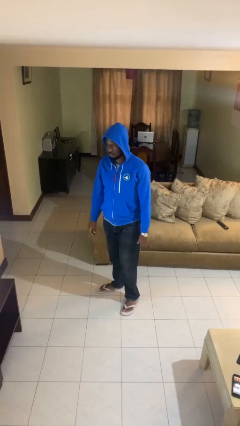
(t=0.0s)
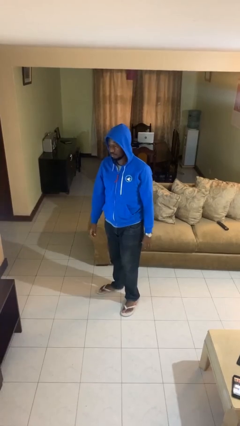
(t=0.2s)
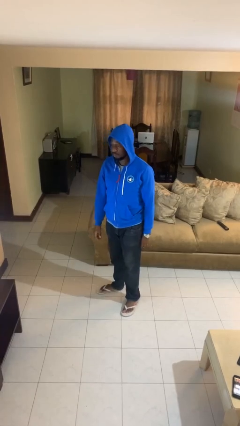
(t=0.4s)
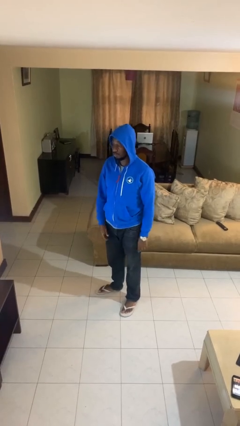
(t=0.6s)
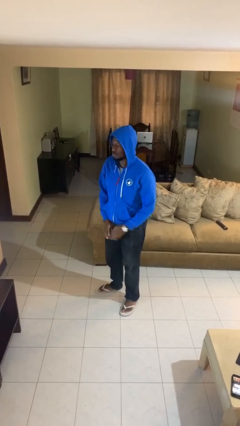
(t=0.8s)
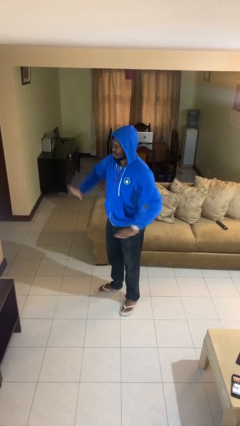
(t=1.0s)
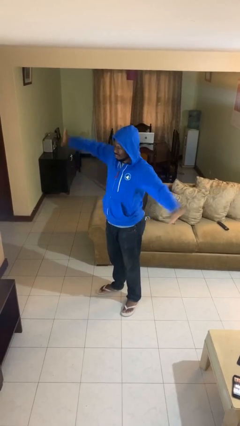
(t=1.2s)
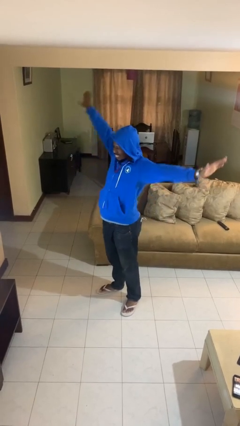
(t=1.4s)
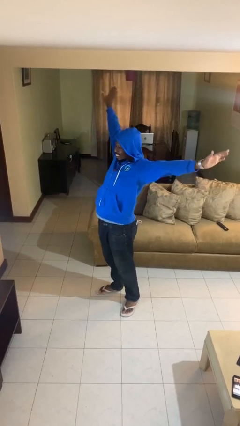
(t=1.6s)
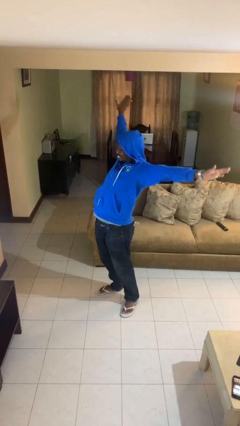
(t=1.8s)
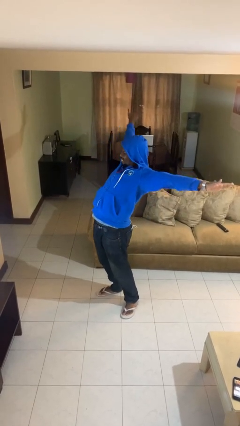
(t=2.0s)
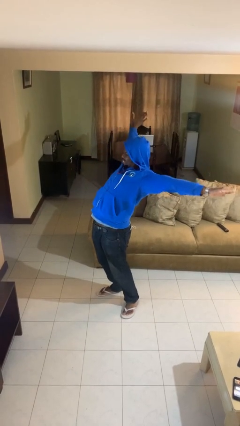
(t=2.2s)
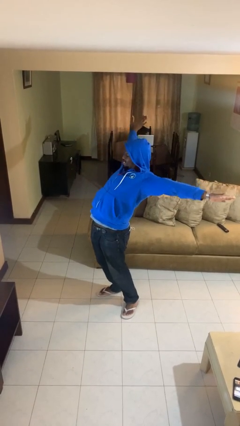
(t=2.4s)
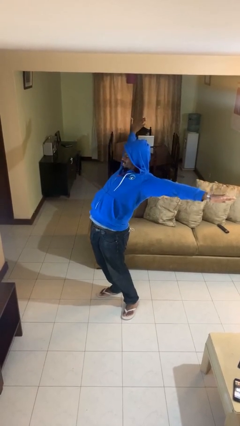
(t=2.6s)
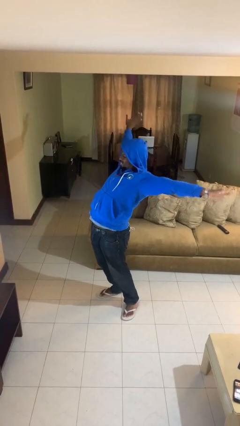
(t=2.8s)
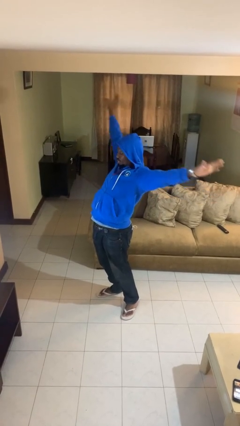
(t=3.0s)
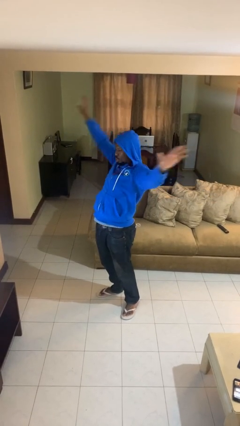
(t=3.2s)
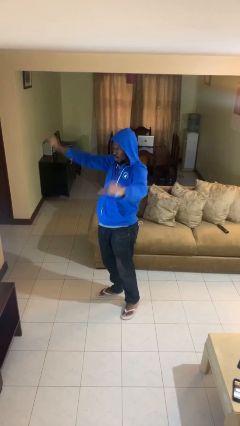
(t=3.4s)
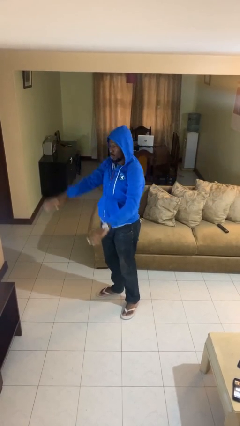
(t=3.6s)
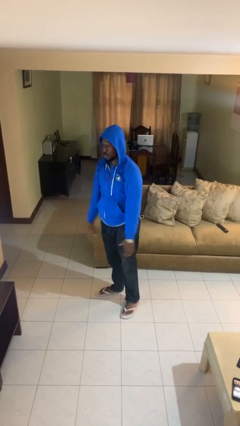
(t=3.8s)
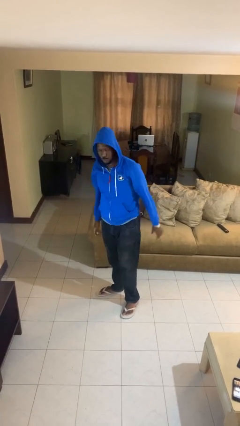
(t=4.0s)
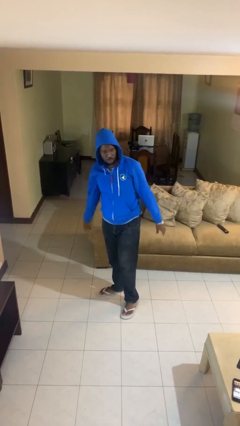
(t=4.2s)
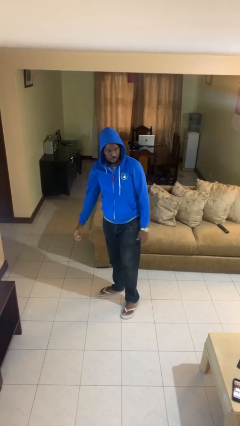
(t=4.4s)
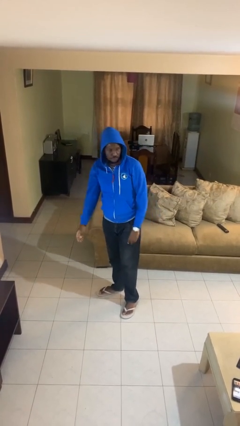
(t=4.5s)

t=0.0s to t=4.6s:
person stretches arms to side

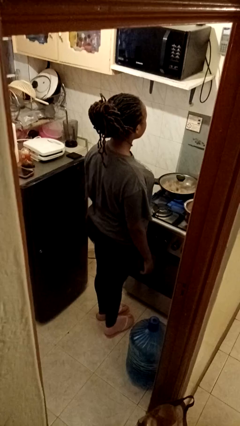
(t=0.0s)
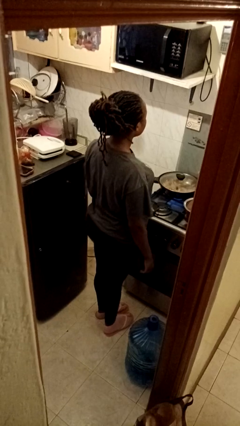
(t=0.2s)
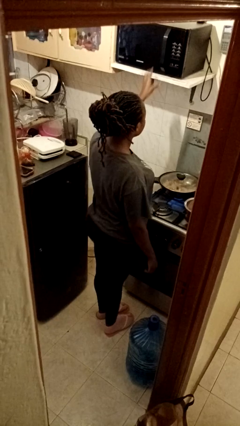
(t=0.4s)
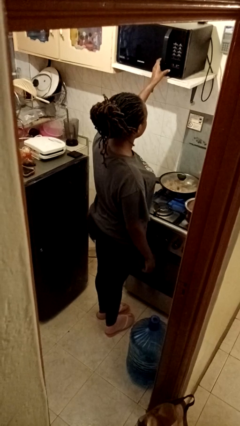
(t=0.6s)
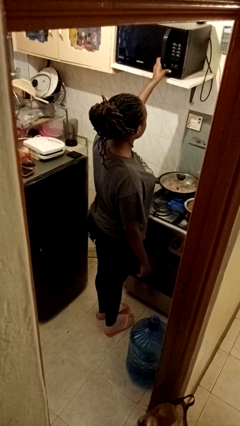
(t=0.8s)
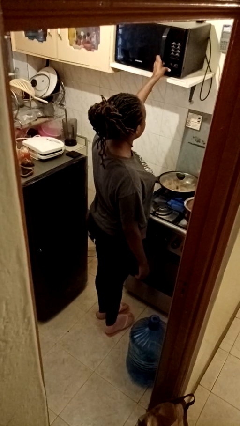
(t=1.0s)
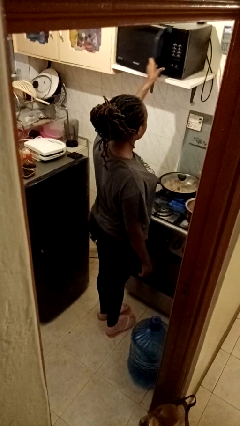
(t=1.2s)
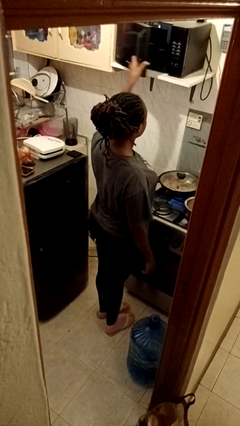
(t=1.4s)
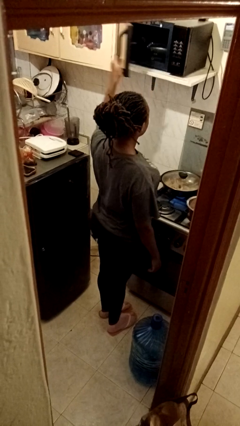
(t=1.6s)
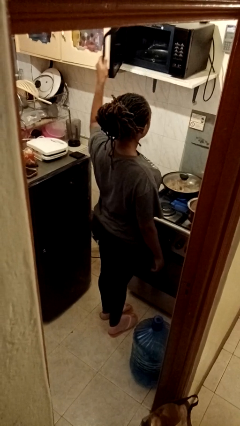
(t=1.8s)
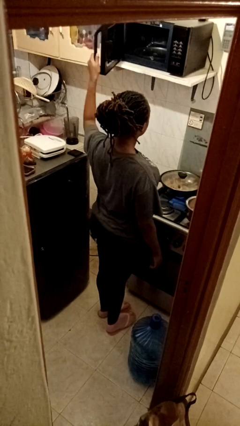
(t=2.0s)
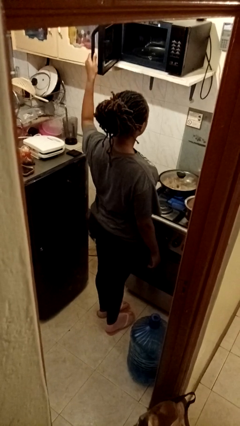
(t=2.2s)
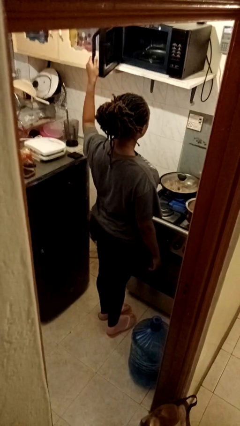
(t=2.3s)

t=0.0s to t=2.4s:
person opens microwave

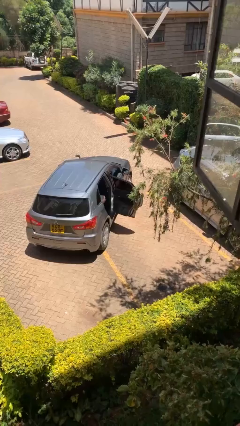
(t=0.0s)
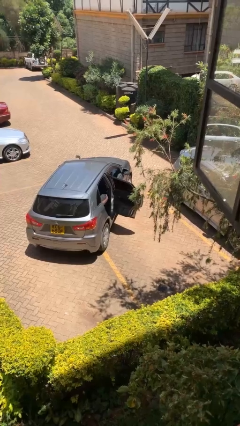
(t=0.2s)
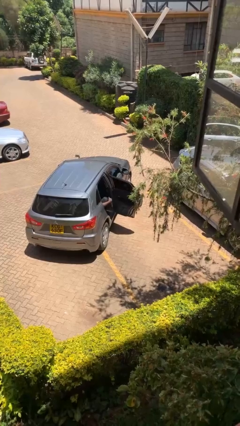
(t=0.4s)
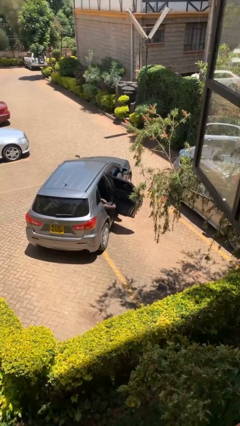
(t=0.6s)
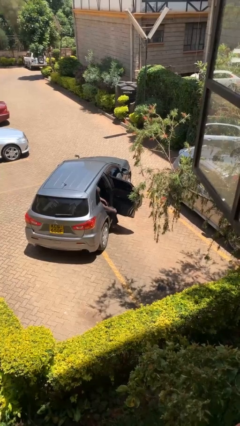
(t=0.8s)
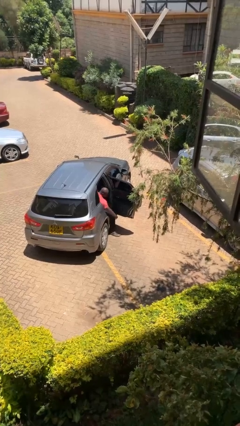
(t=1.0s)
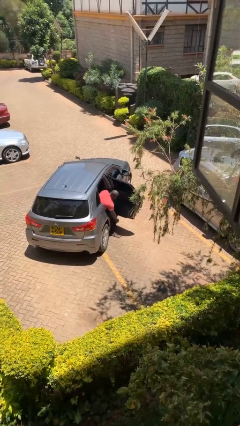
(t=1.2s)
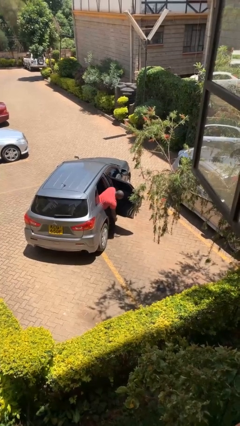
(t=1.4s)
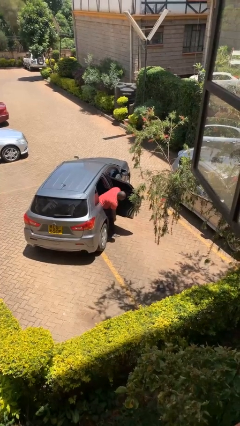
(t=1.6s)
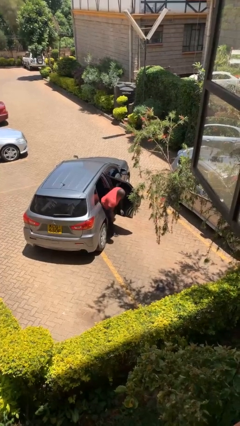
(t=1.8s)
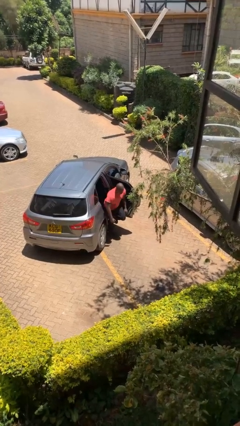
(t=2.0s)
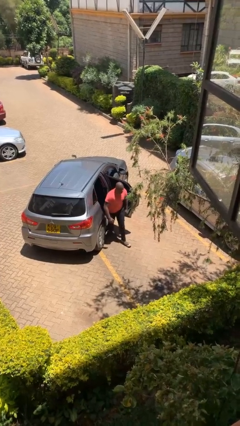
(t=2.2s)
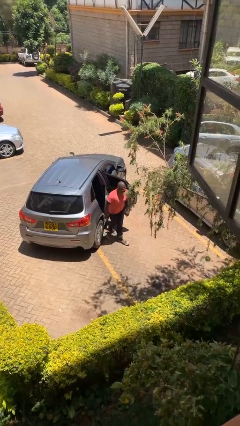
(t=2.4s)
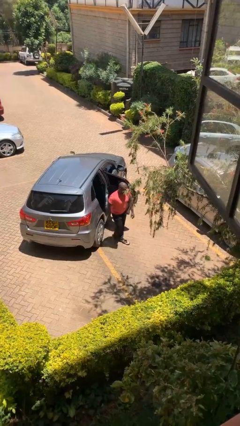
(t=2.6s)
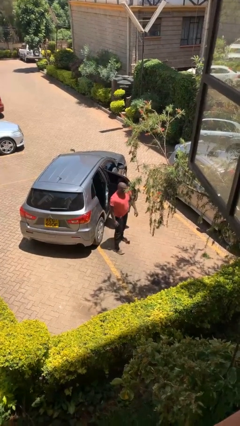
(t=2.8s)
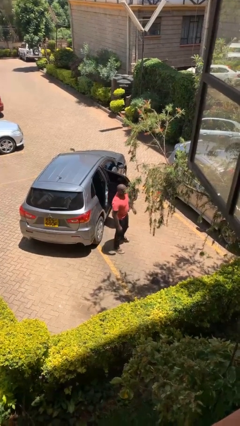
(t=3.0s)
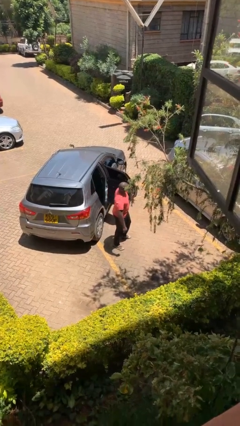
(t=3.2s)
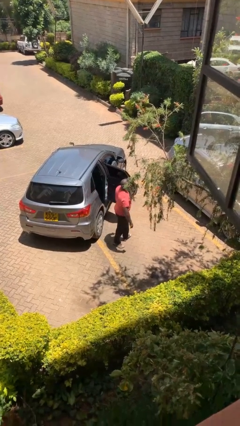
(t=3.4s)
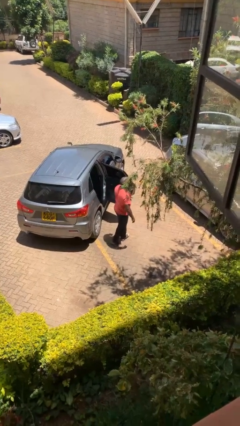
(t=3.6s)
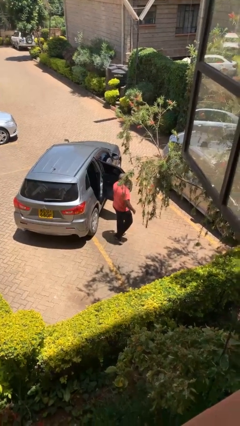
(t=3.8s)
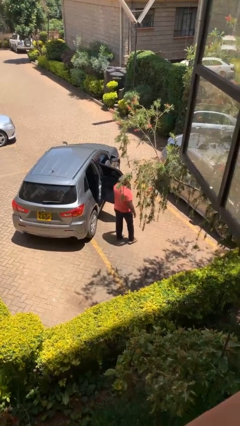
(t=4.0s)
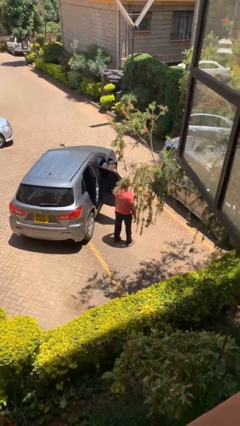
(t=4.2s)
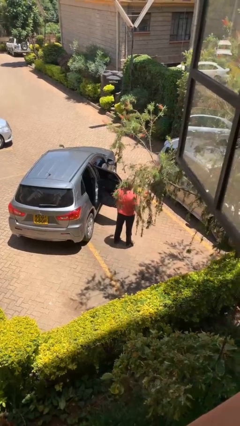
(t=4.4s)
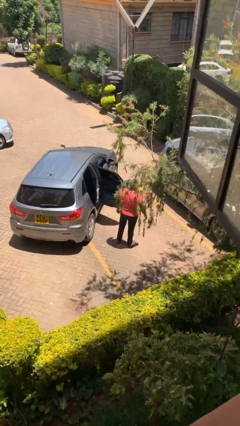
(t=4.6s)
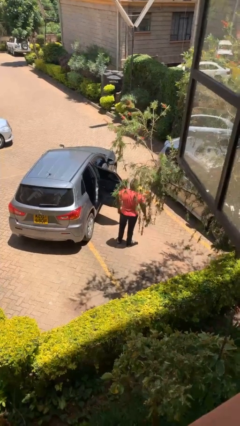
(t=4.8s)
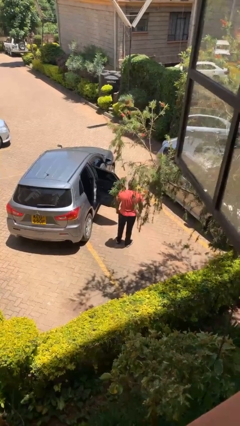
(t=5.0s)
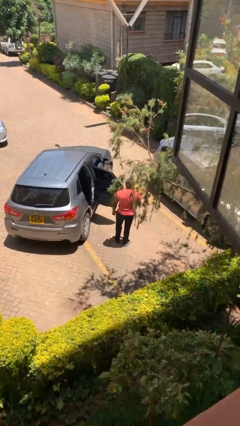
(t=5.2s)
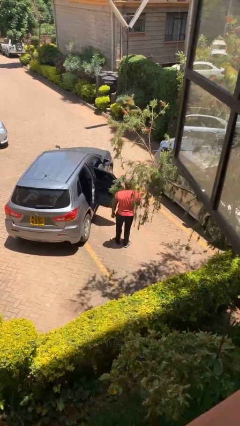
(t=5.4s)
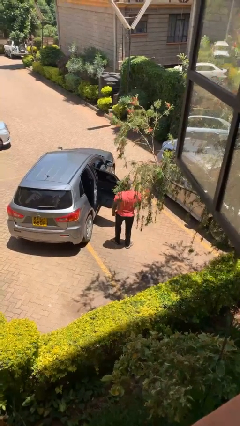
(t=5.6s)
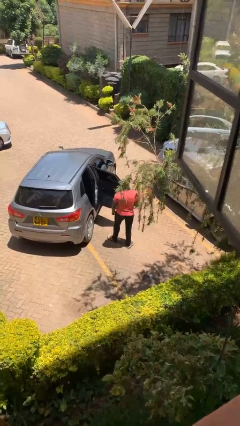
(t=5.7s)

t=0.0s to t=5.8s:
person exits car

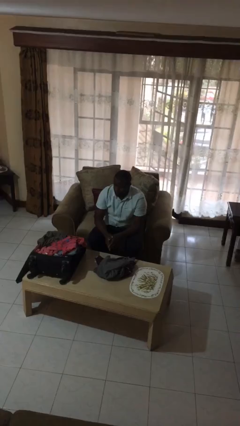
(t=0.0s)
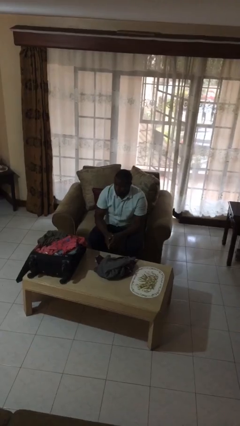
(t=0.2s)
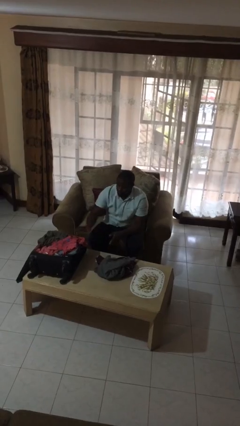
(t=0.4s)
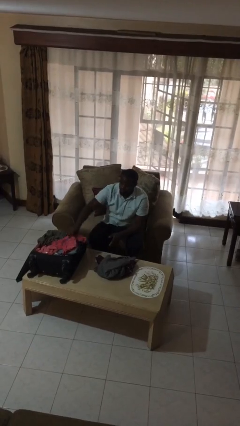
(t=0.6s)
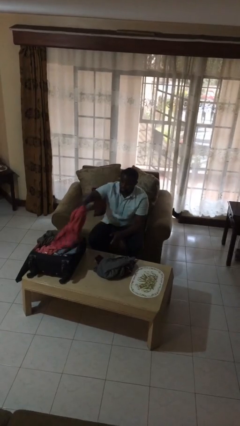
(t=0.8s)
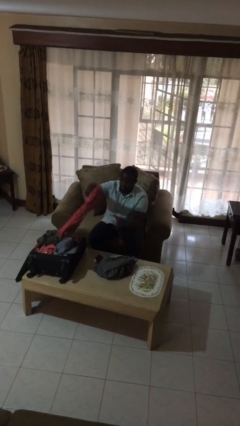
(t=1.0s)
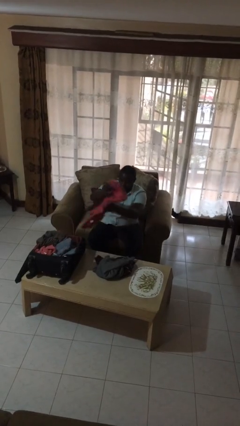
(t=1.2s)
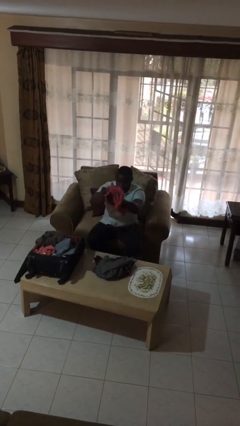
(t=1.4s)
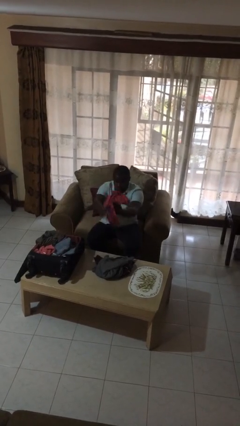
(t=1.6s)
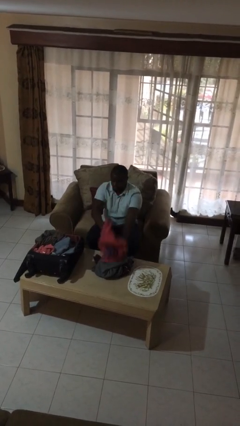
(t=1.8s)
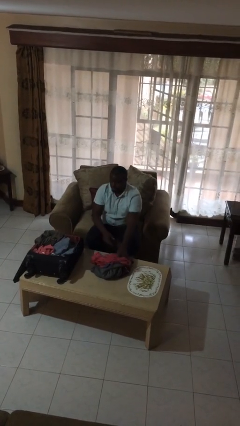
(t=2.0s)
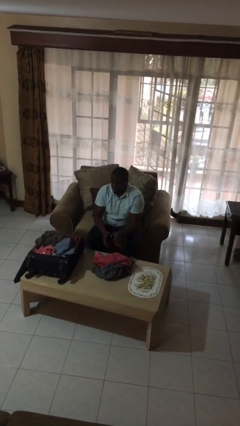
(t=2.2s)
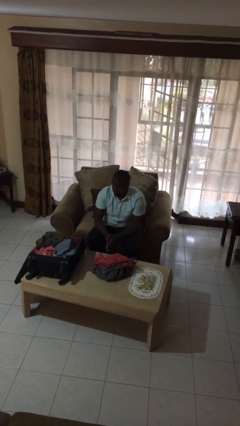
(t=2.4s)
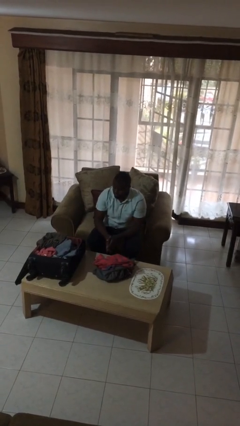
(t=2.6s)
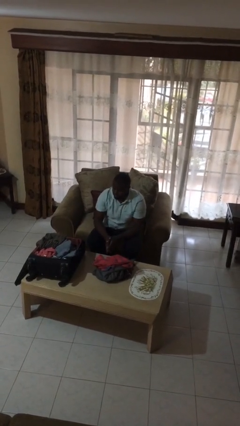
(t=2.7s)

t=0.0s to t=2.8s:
person unloads clothes from suitcase

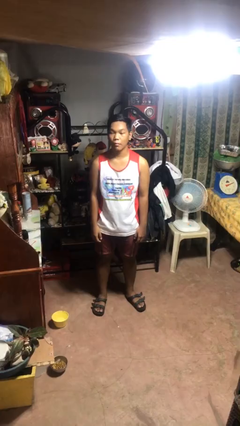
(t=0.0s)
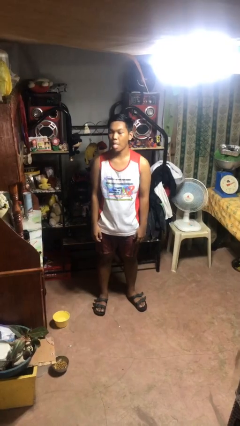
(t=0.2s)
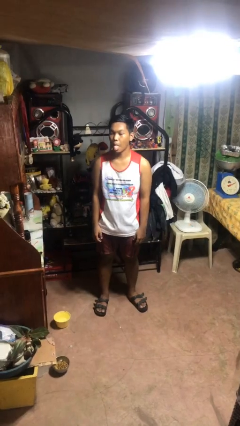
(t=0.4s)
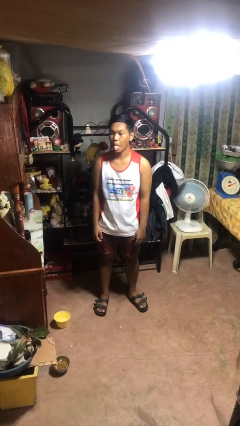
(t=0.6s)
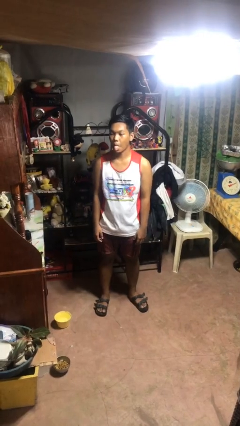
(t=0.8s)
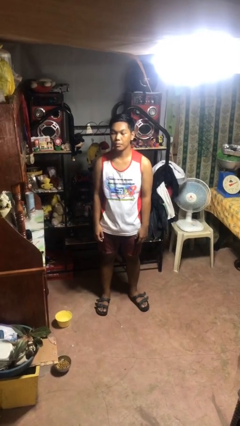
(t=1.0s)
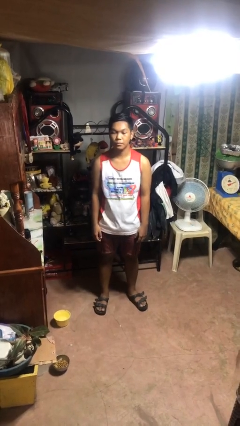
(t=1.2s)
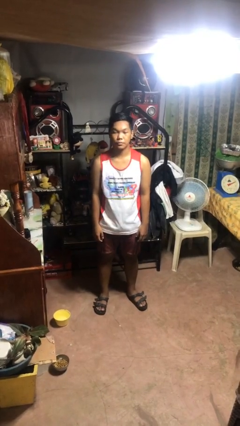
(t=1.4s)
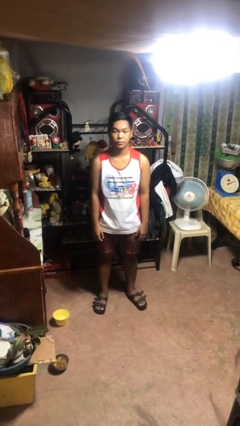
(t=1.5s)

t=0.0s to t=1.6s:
person sticks out tongue
